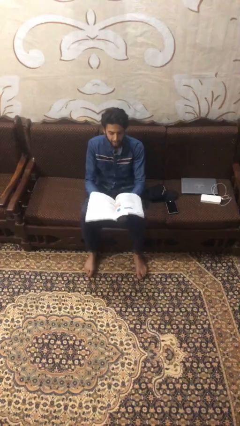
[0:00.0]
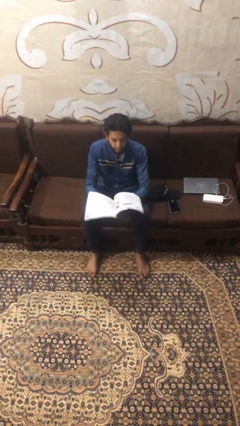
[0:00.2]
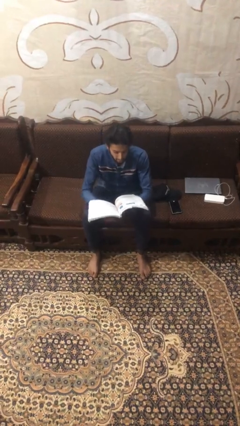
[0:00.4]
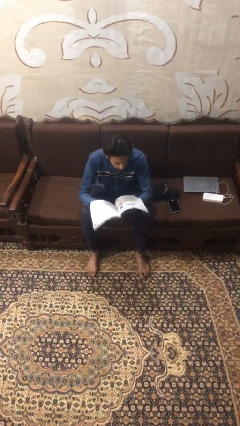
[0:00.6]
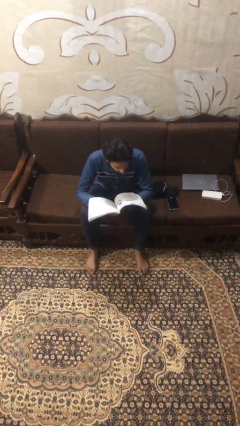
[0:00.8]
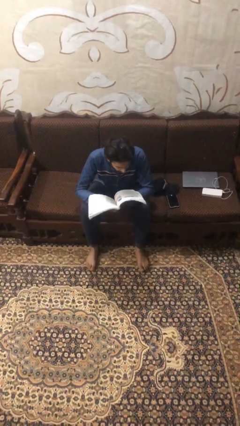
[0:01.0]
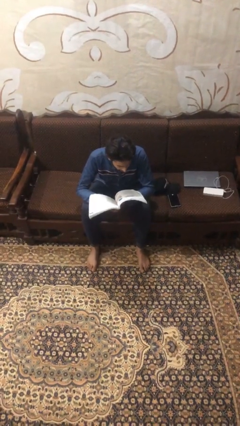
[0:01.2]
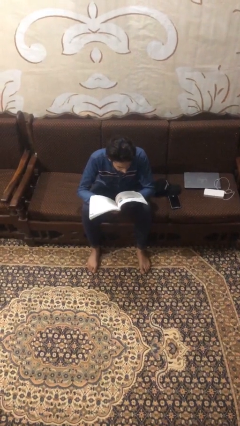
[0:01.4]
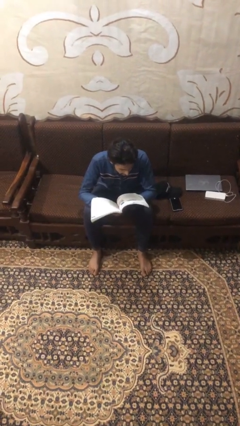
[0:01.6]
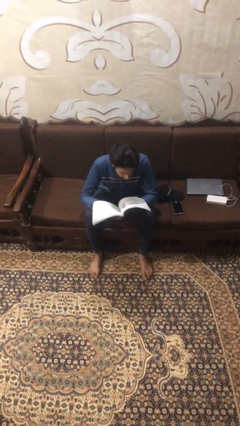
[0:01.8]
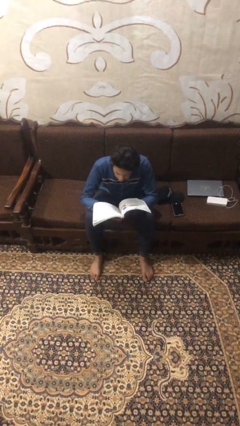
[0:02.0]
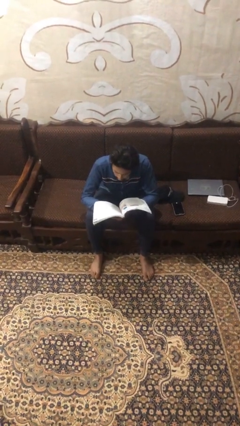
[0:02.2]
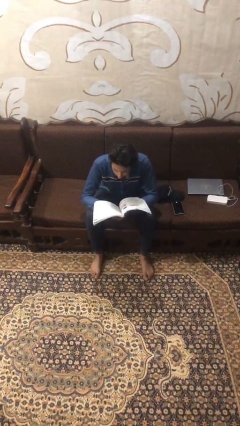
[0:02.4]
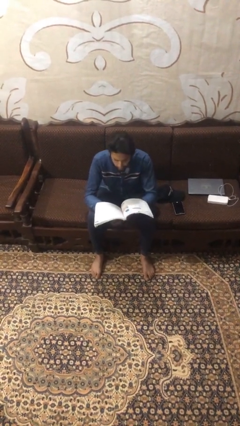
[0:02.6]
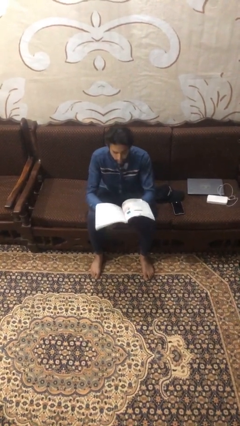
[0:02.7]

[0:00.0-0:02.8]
person reads document

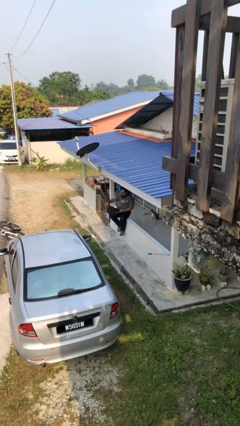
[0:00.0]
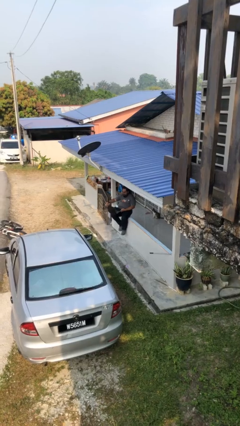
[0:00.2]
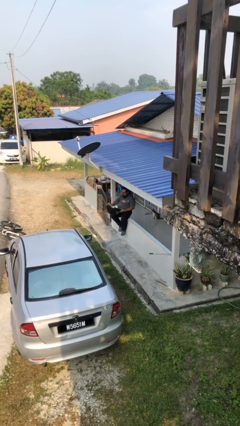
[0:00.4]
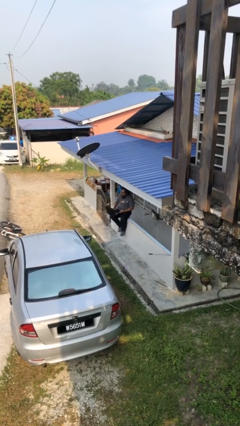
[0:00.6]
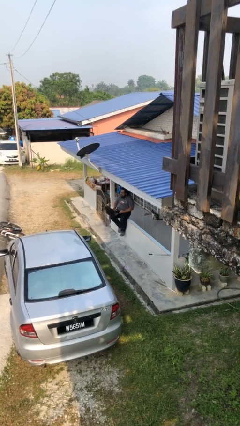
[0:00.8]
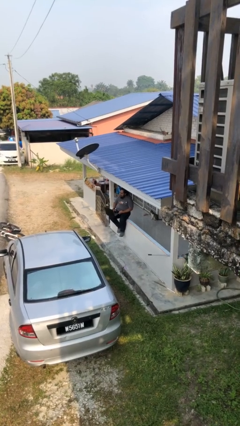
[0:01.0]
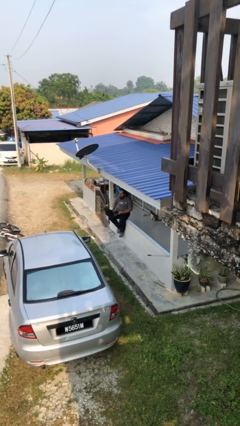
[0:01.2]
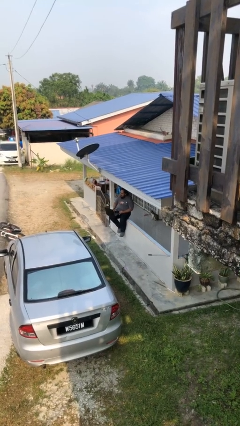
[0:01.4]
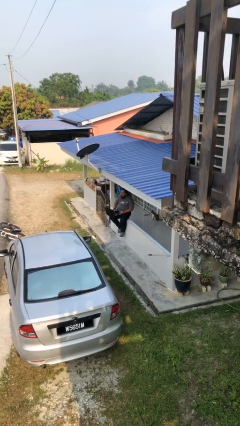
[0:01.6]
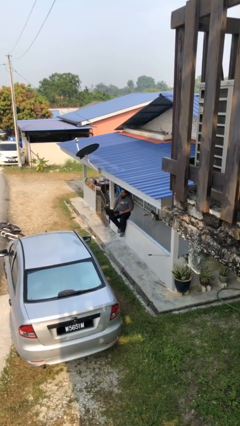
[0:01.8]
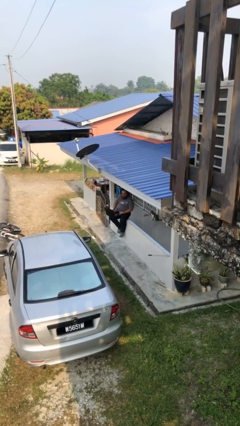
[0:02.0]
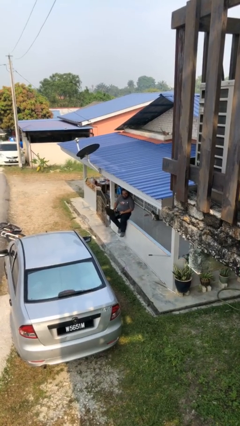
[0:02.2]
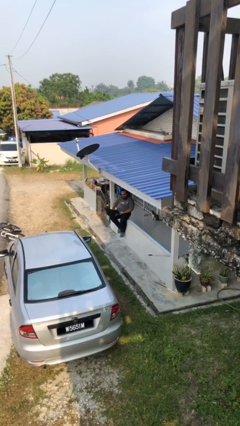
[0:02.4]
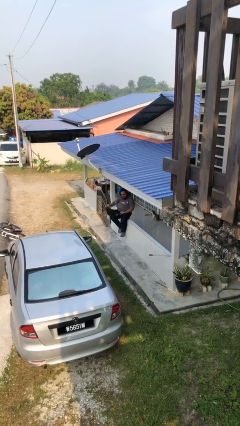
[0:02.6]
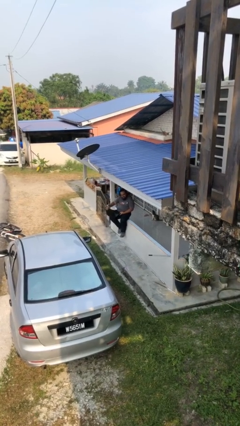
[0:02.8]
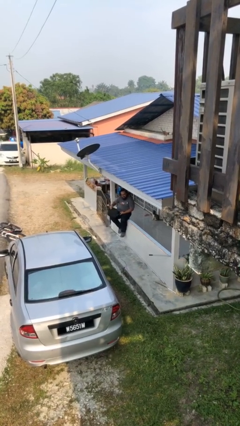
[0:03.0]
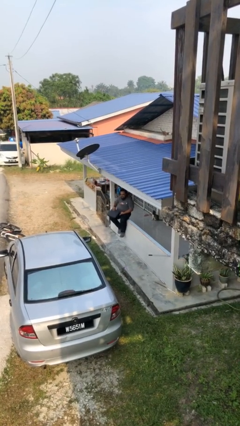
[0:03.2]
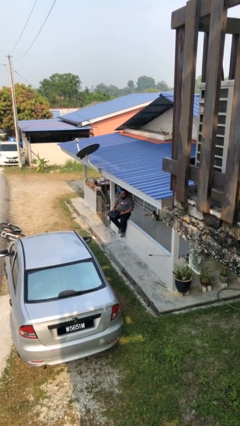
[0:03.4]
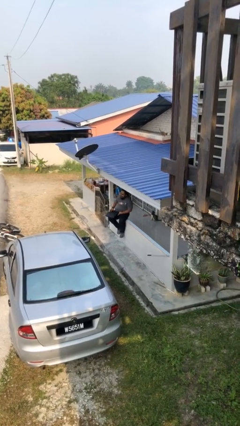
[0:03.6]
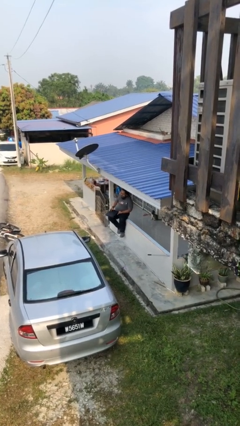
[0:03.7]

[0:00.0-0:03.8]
person interacts with laptop

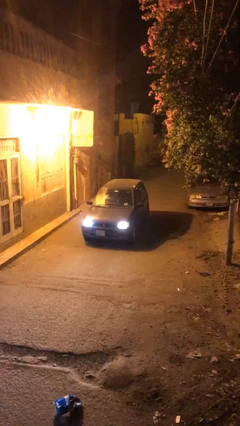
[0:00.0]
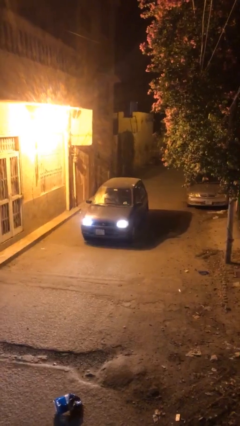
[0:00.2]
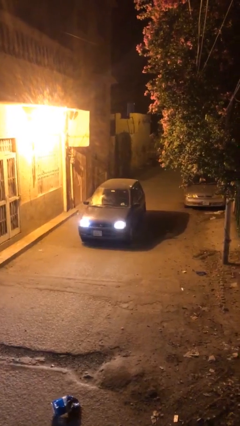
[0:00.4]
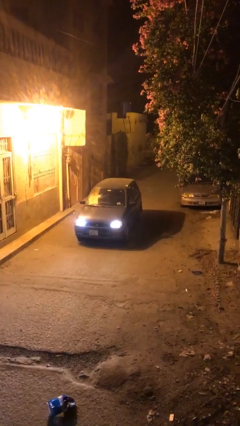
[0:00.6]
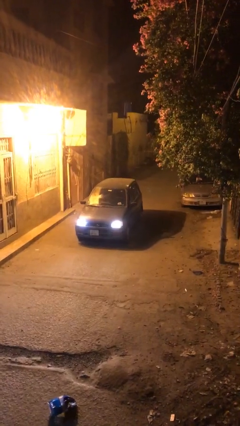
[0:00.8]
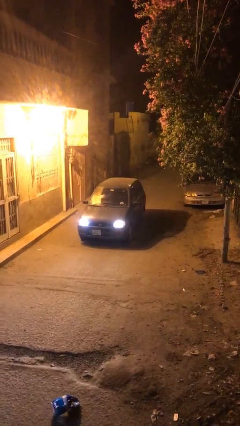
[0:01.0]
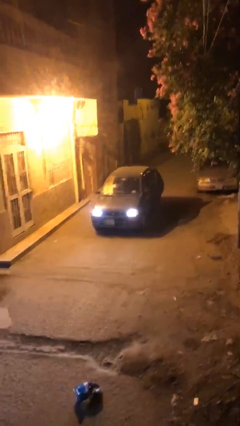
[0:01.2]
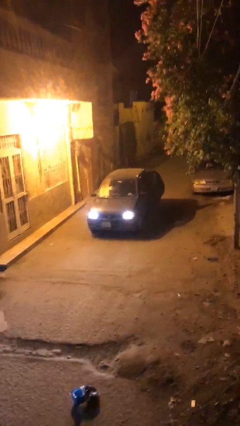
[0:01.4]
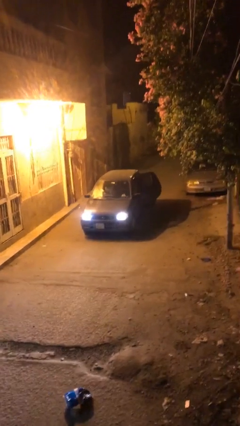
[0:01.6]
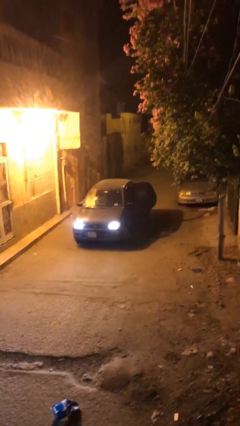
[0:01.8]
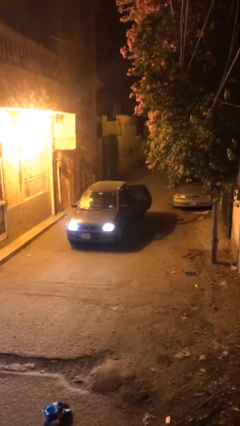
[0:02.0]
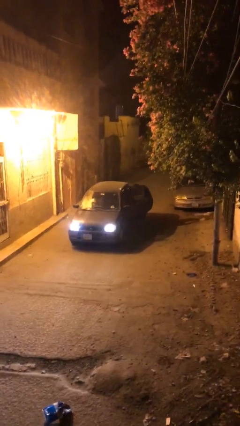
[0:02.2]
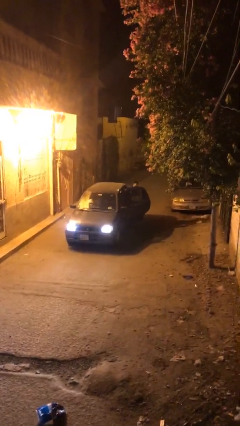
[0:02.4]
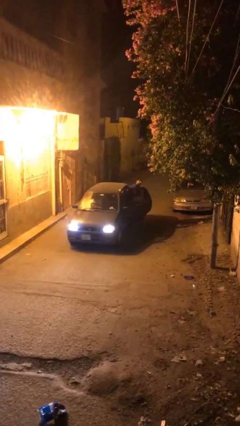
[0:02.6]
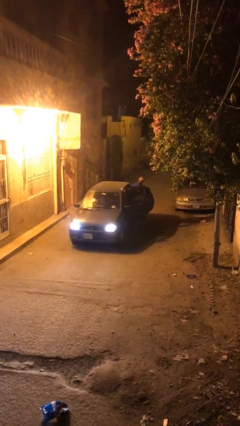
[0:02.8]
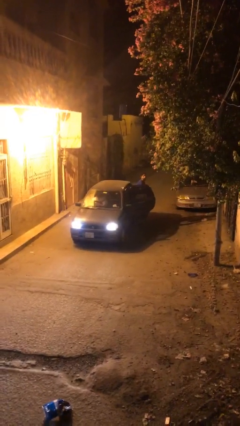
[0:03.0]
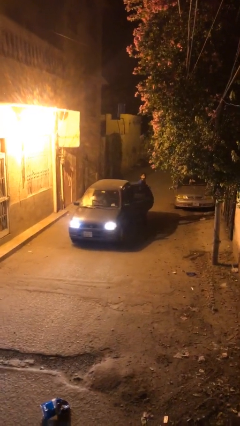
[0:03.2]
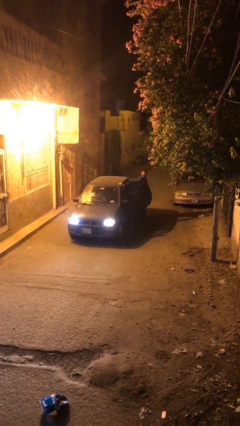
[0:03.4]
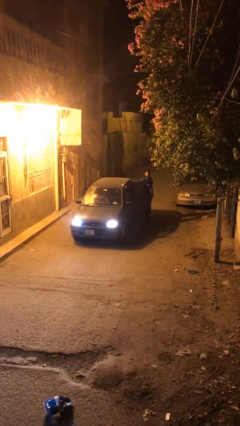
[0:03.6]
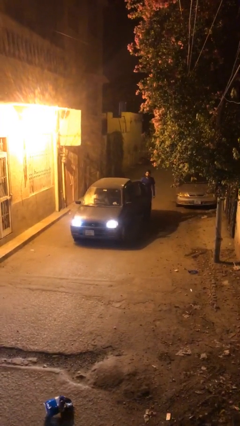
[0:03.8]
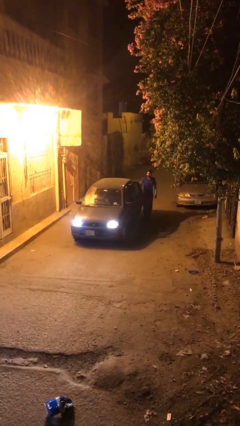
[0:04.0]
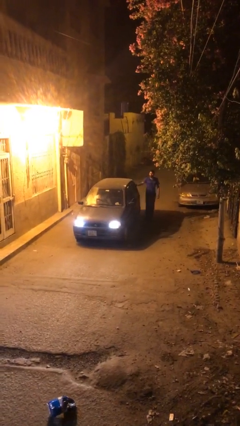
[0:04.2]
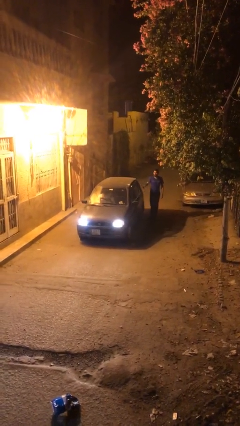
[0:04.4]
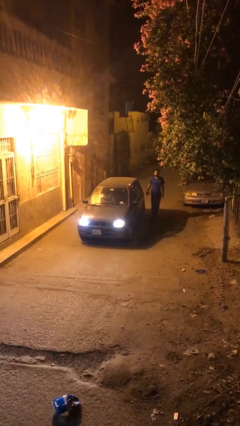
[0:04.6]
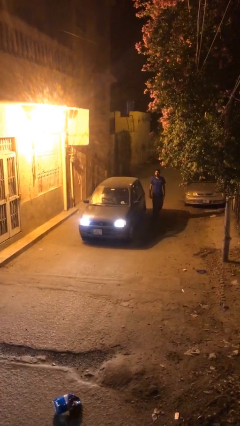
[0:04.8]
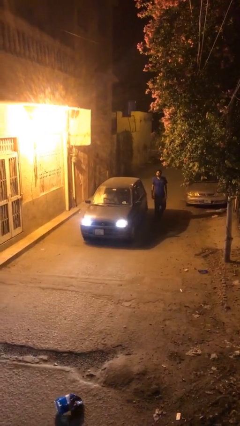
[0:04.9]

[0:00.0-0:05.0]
car drops off person

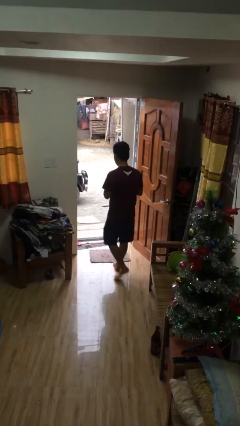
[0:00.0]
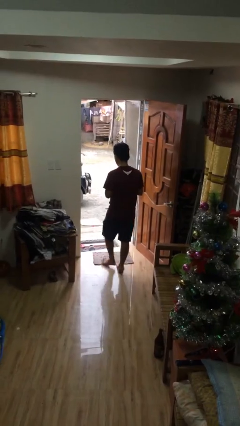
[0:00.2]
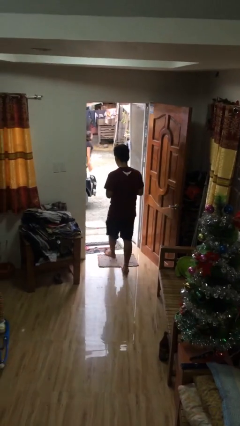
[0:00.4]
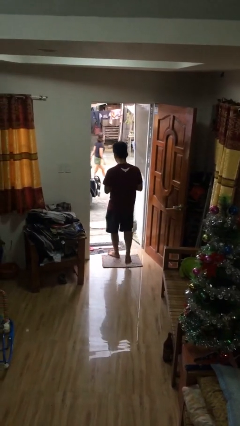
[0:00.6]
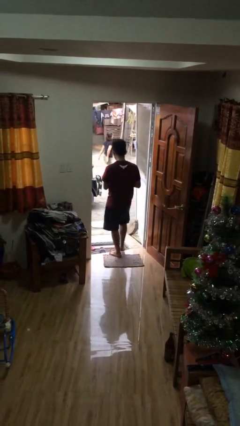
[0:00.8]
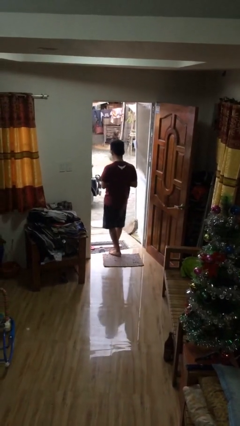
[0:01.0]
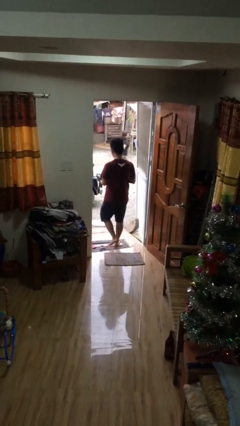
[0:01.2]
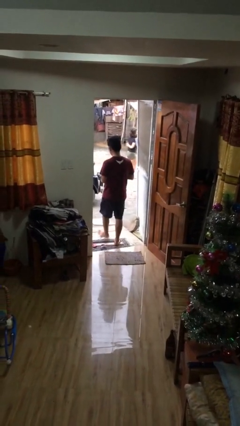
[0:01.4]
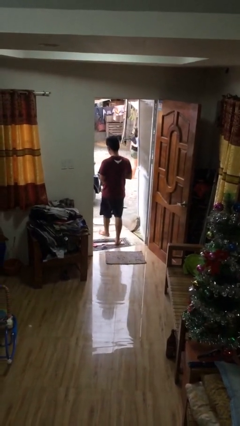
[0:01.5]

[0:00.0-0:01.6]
person exits scene through structure

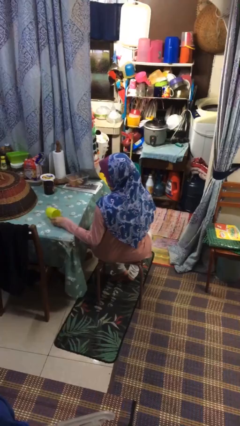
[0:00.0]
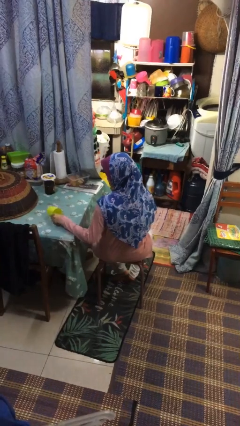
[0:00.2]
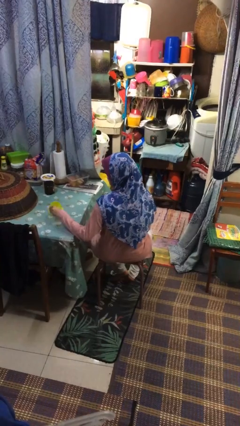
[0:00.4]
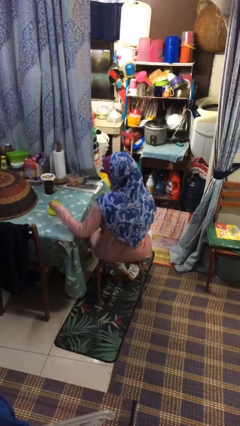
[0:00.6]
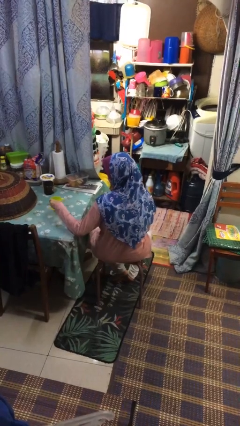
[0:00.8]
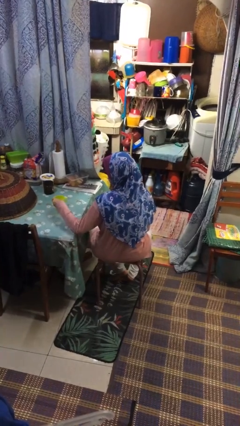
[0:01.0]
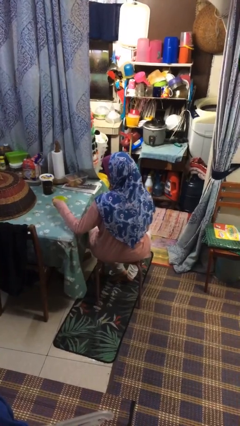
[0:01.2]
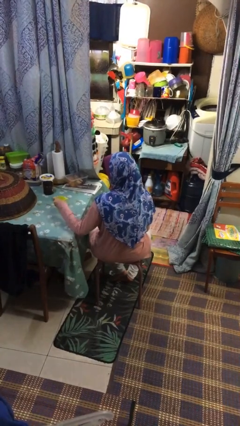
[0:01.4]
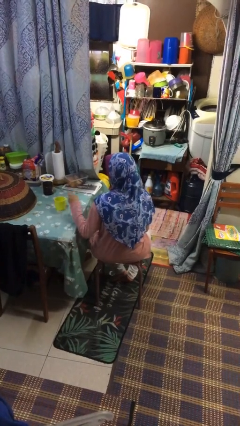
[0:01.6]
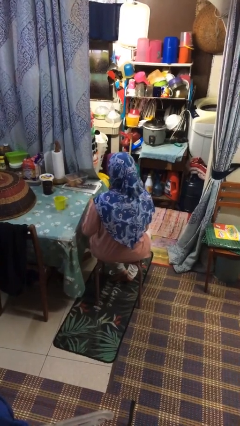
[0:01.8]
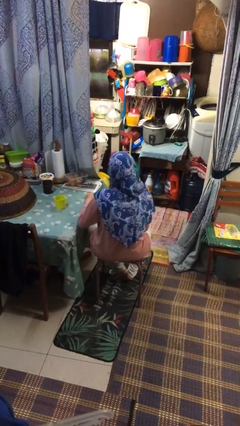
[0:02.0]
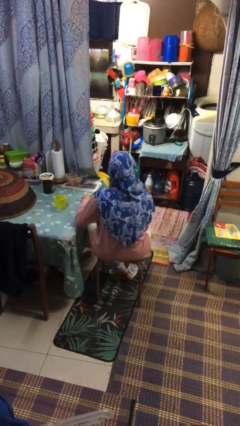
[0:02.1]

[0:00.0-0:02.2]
person sets upright glass

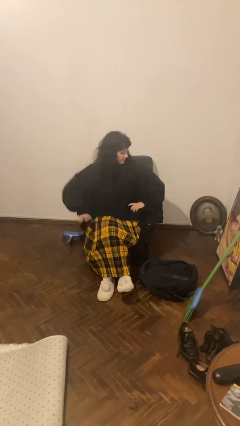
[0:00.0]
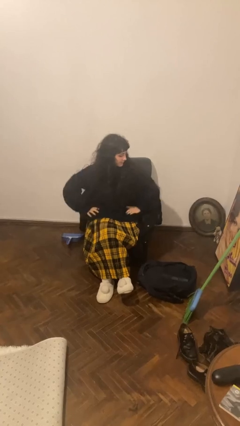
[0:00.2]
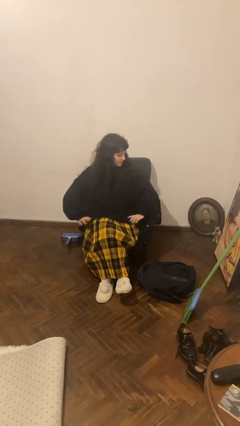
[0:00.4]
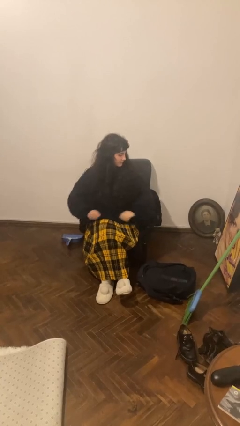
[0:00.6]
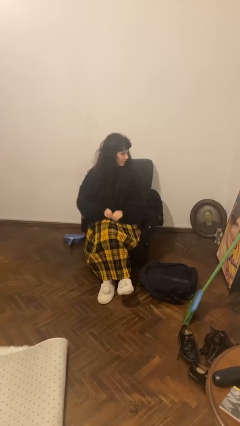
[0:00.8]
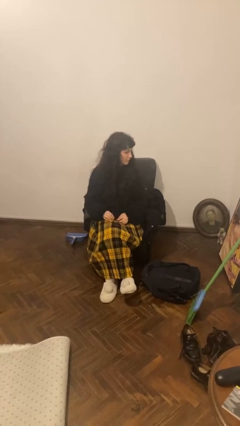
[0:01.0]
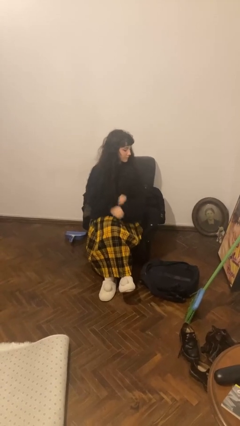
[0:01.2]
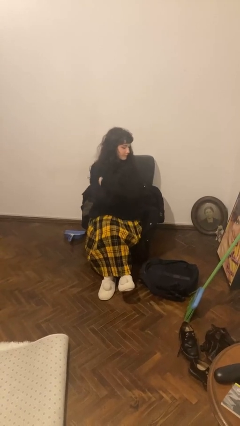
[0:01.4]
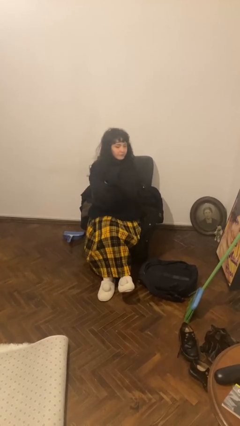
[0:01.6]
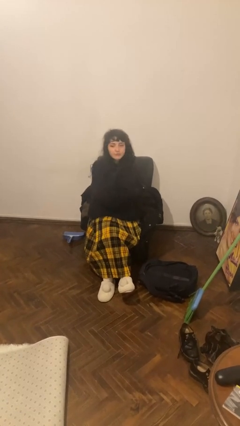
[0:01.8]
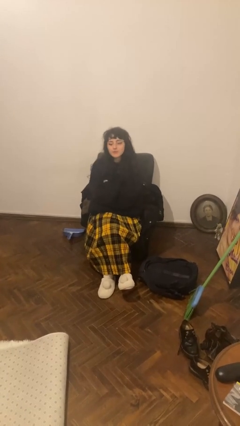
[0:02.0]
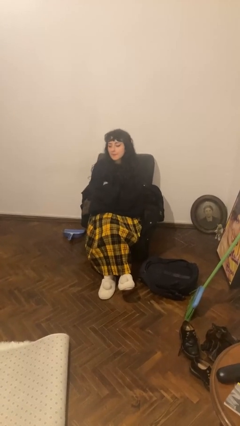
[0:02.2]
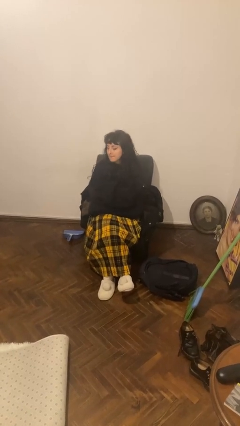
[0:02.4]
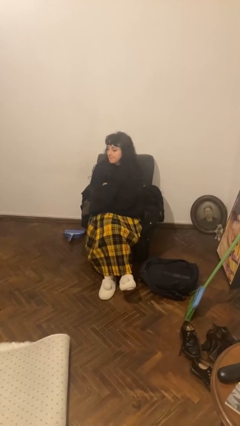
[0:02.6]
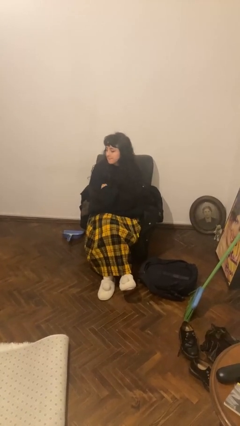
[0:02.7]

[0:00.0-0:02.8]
person crosses arms
